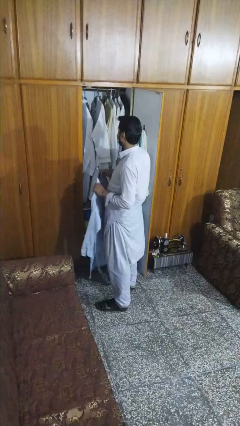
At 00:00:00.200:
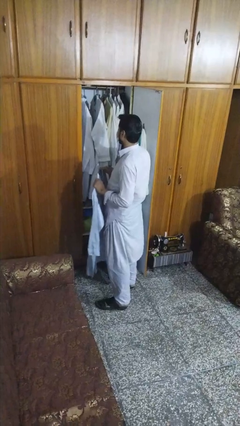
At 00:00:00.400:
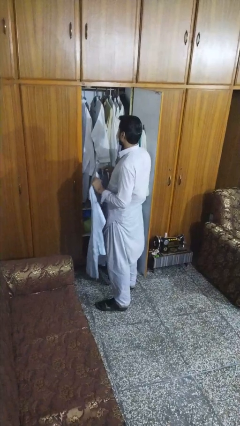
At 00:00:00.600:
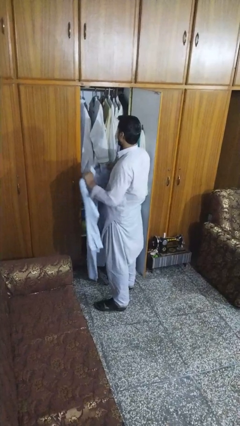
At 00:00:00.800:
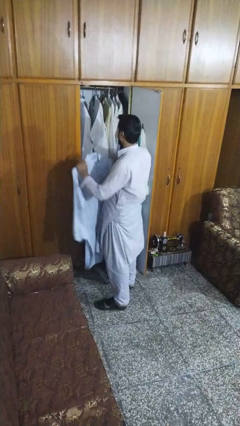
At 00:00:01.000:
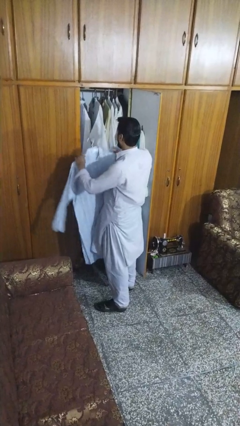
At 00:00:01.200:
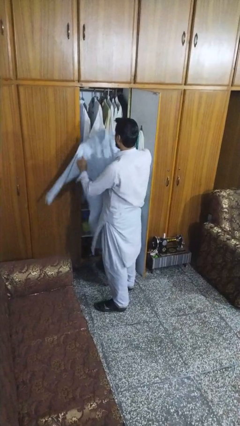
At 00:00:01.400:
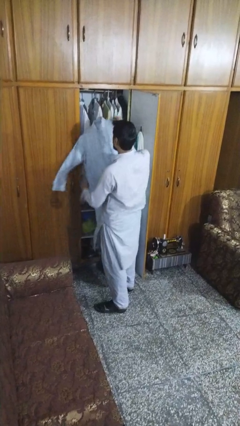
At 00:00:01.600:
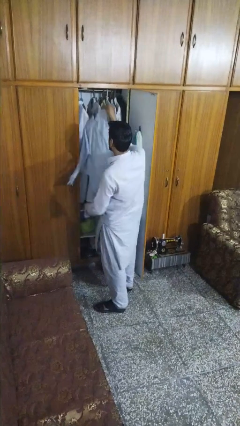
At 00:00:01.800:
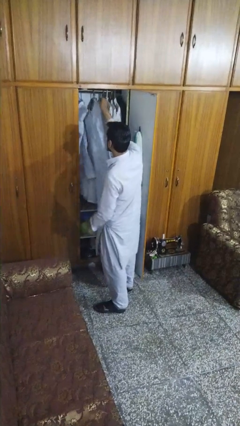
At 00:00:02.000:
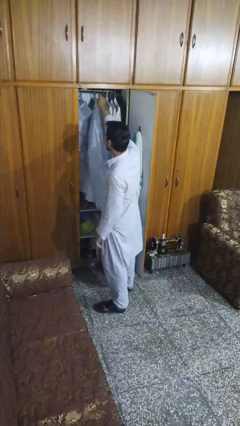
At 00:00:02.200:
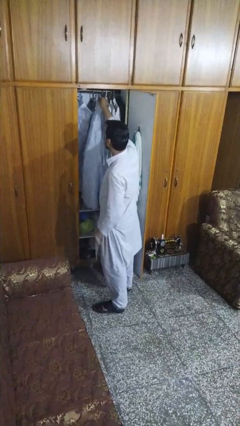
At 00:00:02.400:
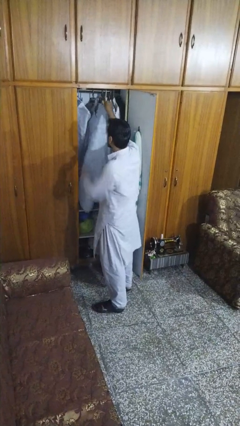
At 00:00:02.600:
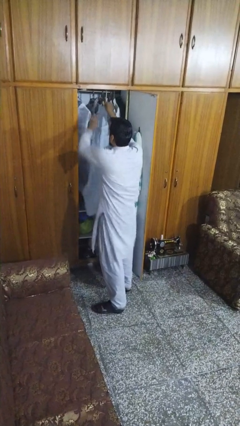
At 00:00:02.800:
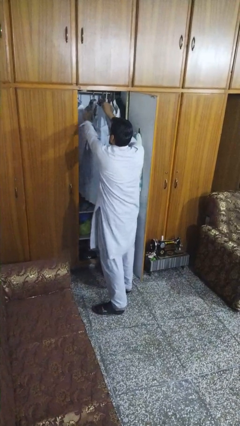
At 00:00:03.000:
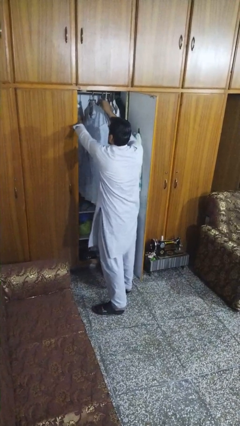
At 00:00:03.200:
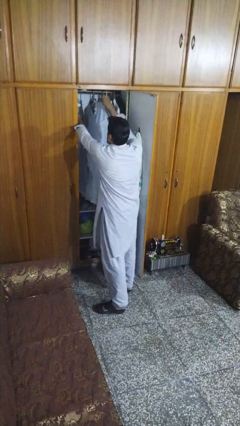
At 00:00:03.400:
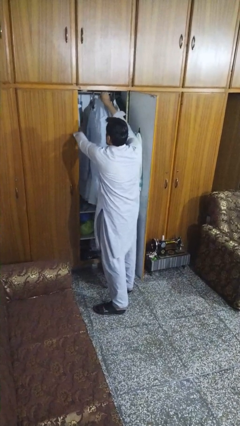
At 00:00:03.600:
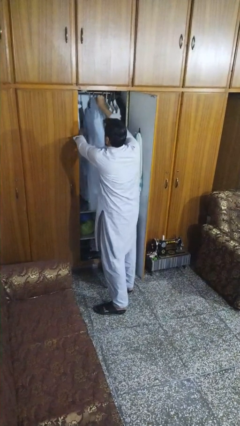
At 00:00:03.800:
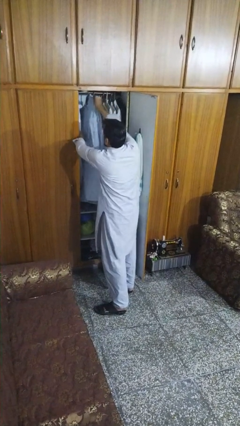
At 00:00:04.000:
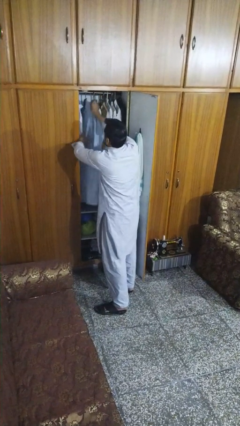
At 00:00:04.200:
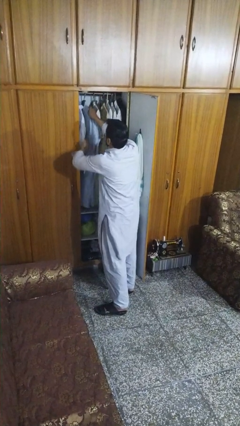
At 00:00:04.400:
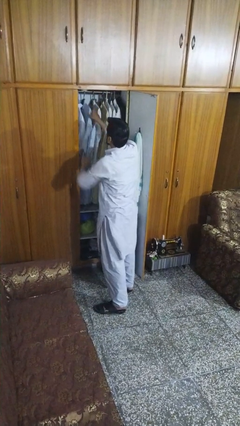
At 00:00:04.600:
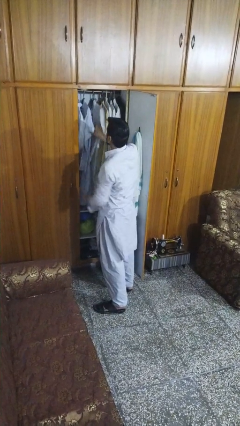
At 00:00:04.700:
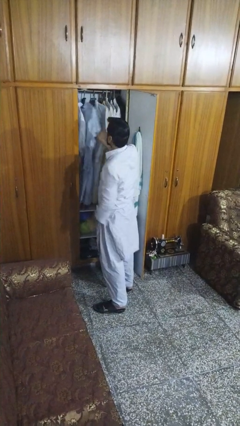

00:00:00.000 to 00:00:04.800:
person puts clothes into dresser

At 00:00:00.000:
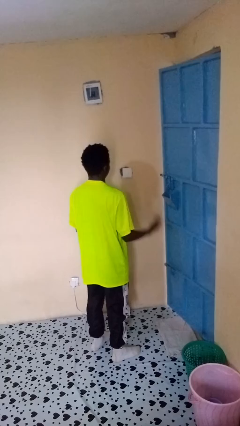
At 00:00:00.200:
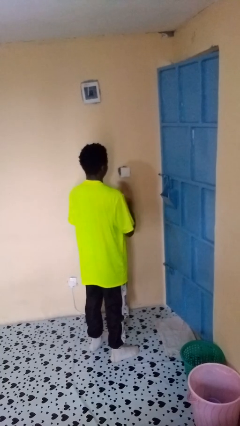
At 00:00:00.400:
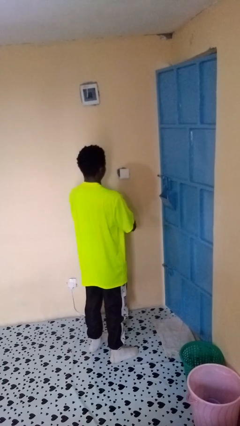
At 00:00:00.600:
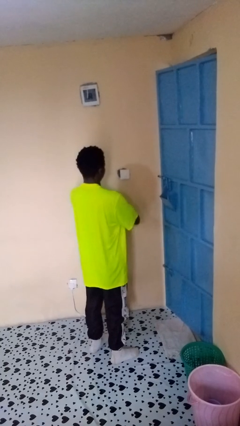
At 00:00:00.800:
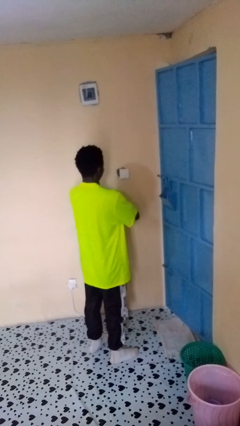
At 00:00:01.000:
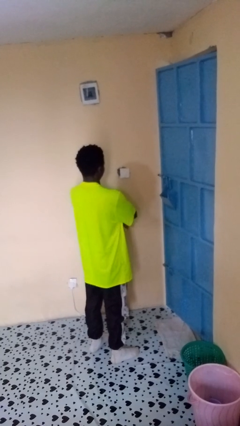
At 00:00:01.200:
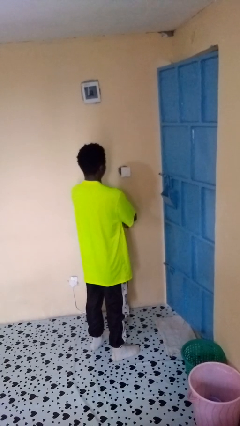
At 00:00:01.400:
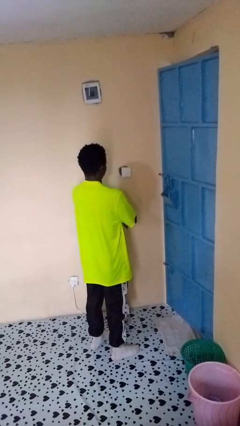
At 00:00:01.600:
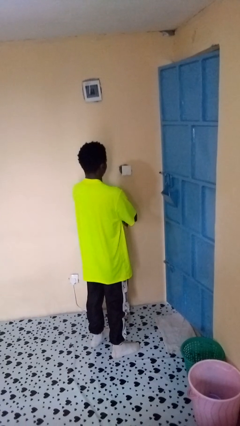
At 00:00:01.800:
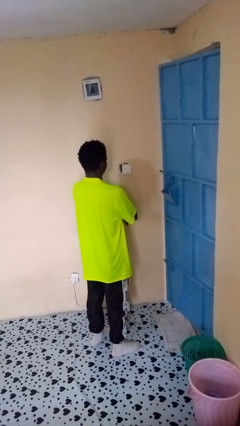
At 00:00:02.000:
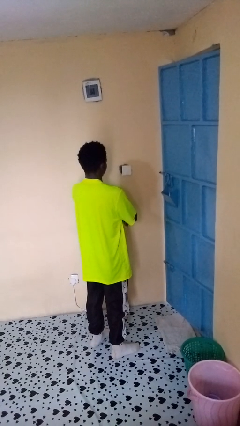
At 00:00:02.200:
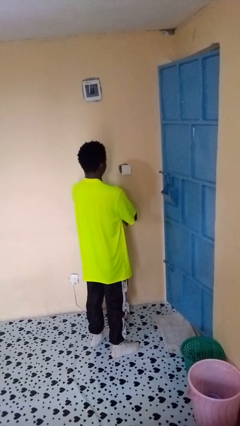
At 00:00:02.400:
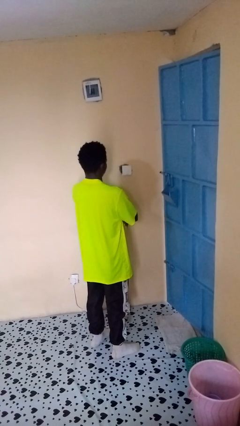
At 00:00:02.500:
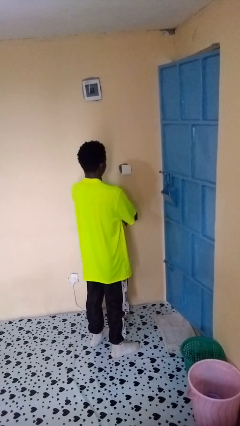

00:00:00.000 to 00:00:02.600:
person crosses arms

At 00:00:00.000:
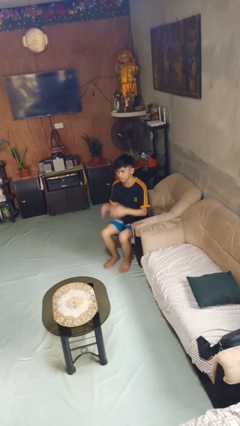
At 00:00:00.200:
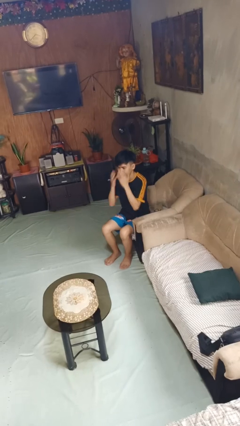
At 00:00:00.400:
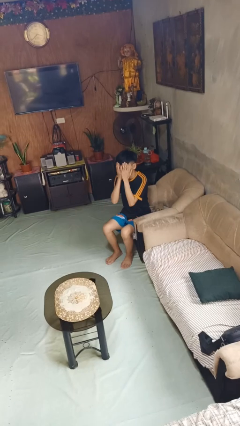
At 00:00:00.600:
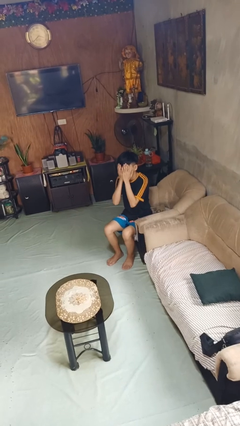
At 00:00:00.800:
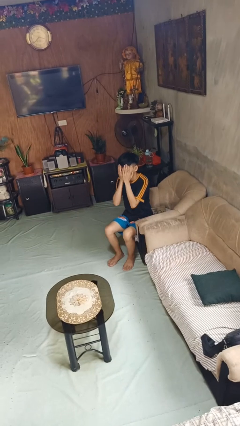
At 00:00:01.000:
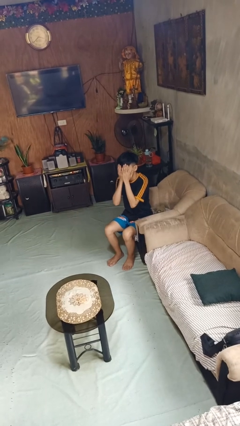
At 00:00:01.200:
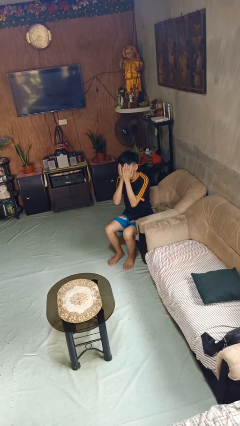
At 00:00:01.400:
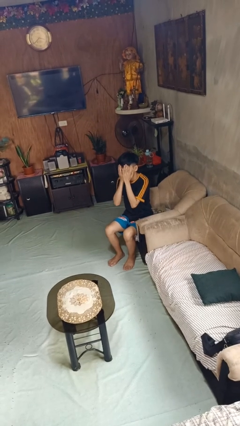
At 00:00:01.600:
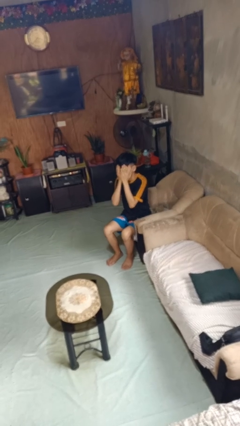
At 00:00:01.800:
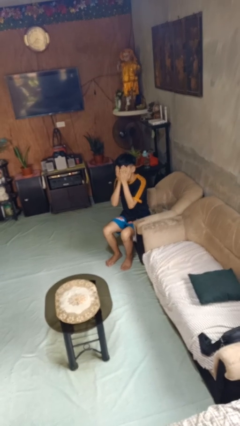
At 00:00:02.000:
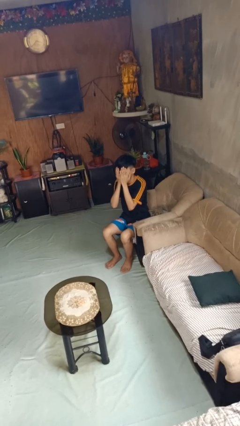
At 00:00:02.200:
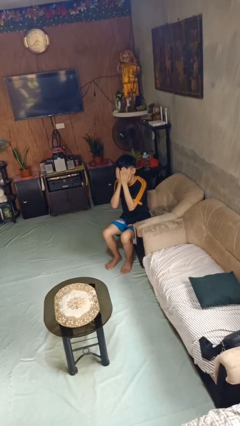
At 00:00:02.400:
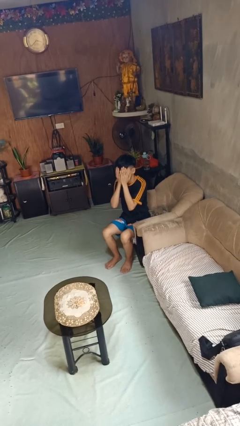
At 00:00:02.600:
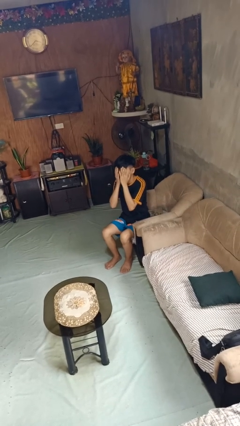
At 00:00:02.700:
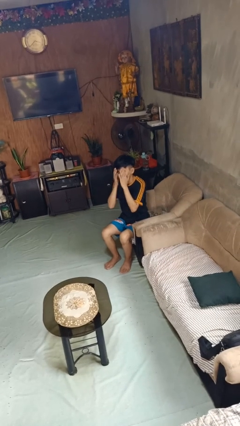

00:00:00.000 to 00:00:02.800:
person covers face with hands

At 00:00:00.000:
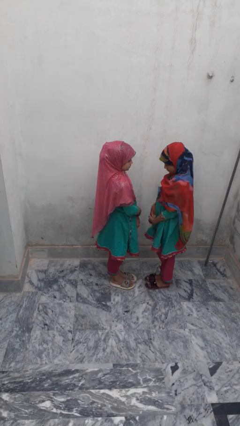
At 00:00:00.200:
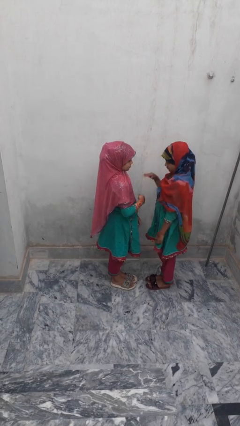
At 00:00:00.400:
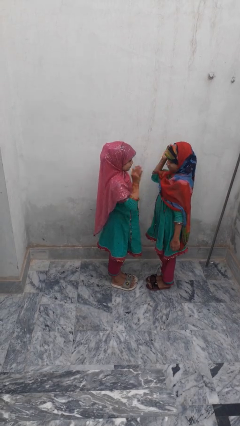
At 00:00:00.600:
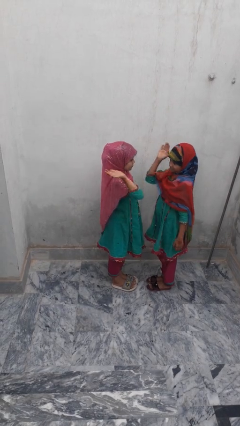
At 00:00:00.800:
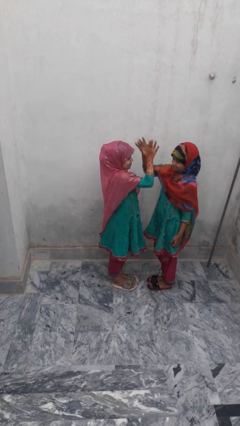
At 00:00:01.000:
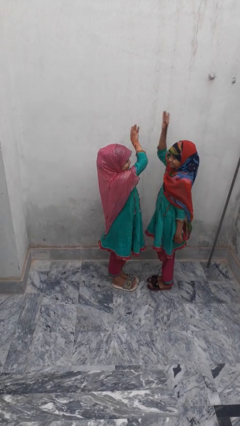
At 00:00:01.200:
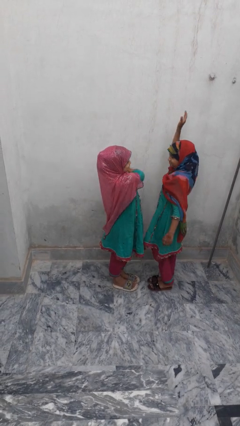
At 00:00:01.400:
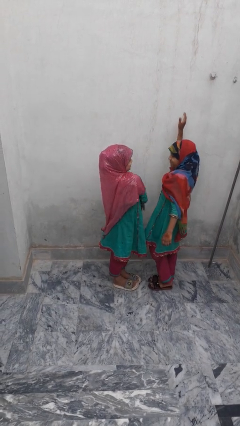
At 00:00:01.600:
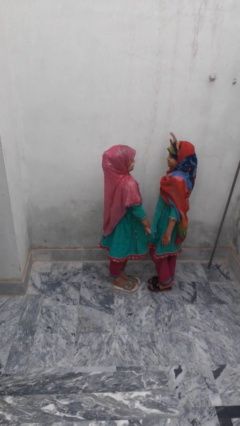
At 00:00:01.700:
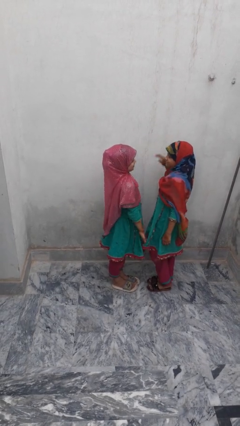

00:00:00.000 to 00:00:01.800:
person highfives hand

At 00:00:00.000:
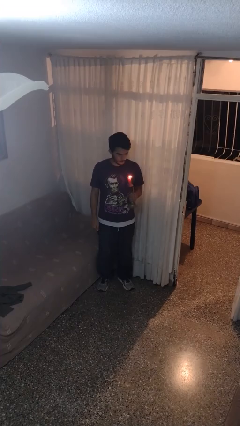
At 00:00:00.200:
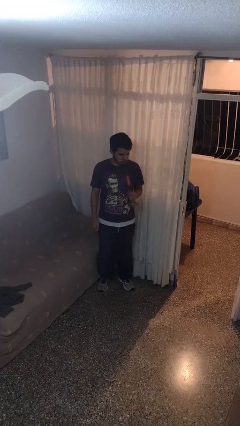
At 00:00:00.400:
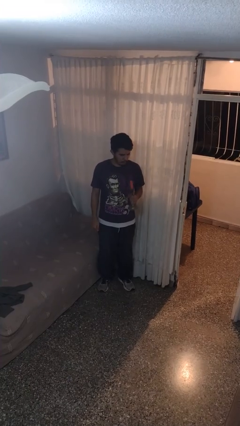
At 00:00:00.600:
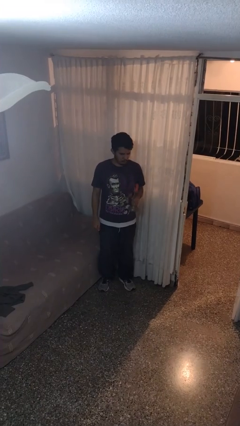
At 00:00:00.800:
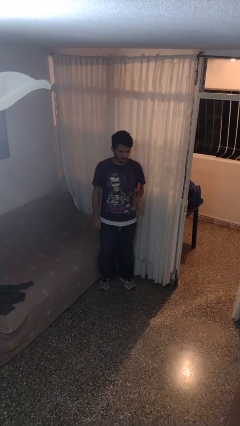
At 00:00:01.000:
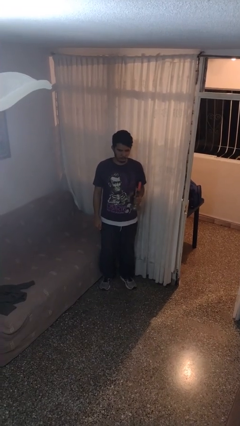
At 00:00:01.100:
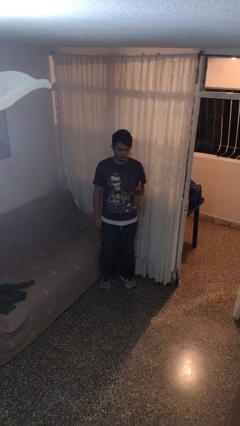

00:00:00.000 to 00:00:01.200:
person extinguishes candle

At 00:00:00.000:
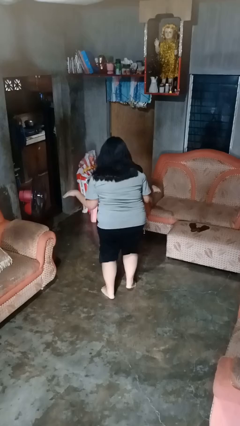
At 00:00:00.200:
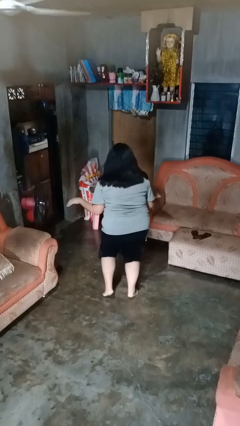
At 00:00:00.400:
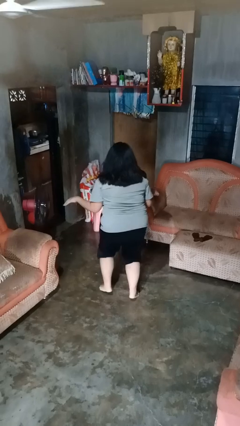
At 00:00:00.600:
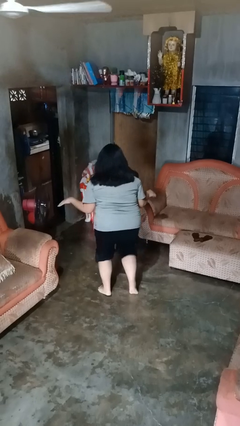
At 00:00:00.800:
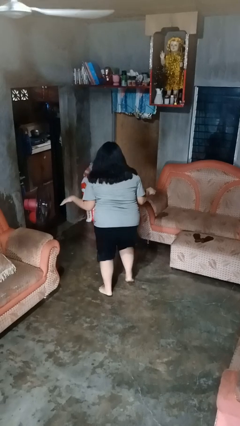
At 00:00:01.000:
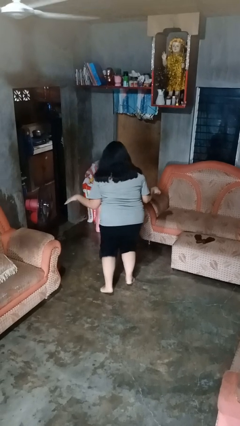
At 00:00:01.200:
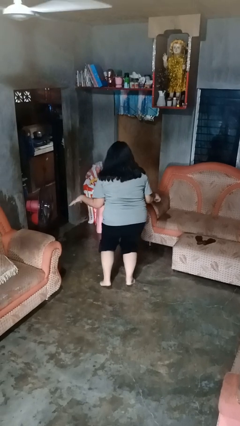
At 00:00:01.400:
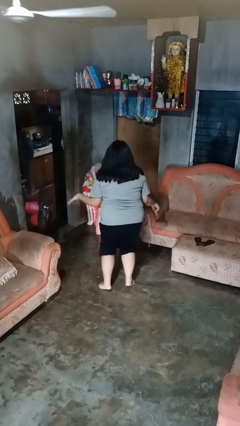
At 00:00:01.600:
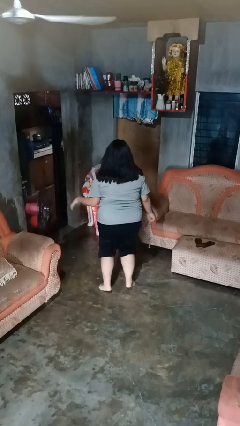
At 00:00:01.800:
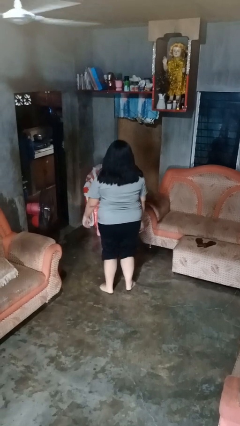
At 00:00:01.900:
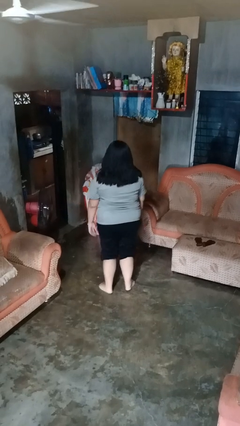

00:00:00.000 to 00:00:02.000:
person walks tiptoe

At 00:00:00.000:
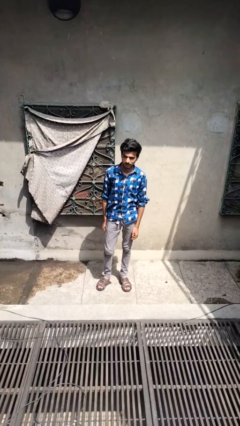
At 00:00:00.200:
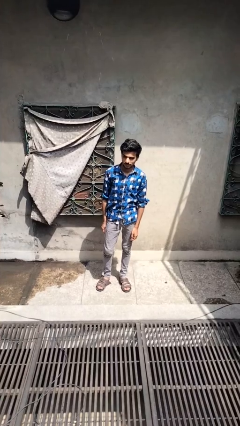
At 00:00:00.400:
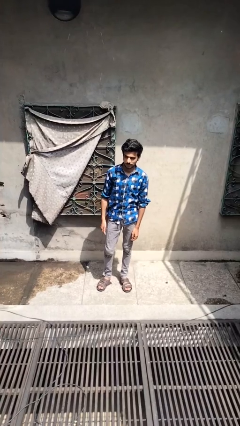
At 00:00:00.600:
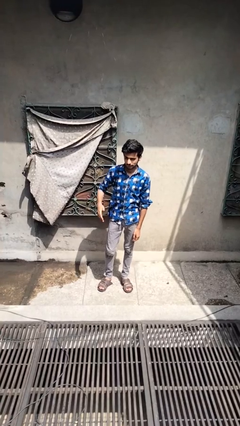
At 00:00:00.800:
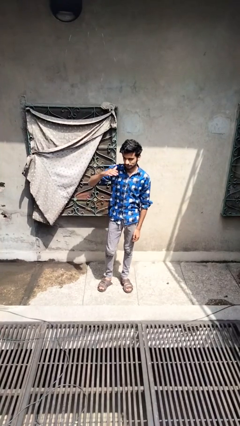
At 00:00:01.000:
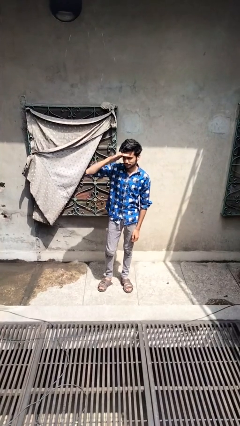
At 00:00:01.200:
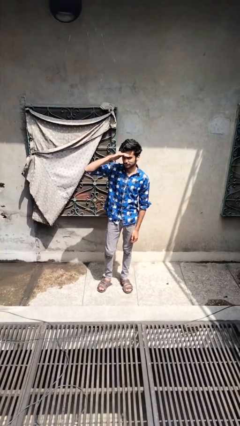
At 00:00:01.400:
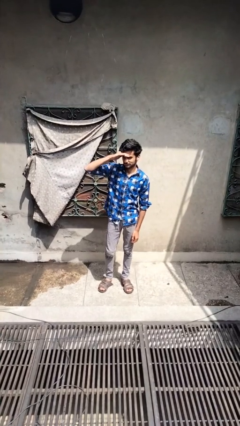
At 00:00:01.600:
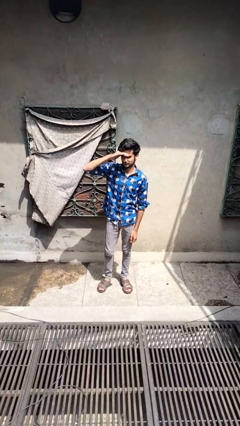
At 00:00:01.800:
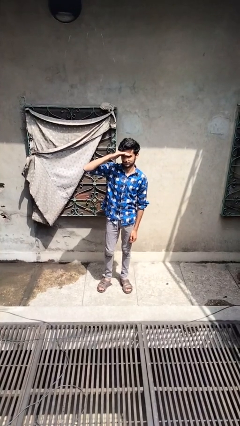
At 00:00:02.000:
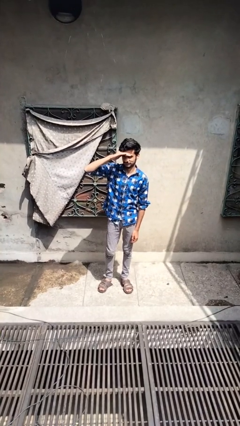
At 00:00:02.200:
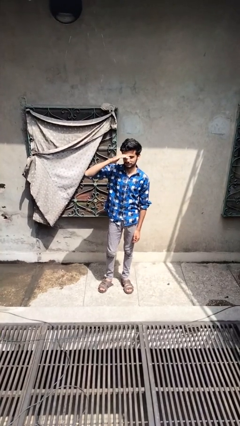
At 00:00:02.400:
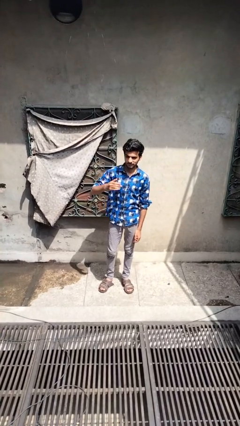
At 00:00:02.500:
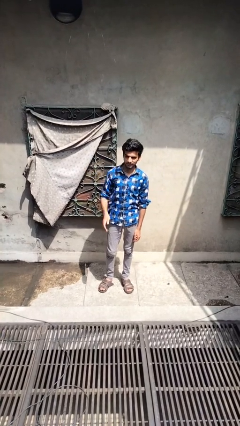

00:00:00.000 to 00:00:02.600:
person shades eyes
